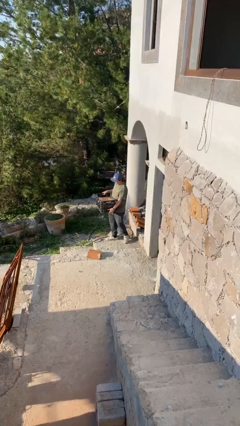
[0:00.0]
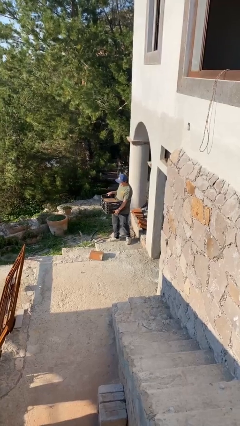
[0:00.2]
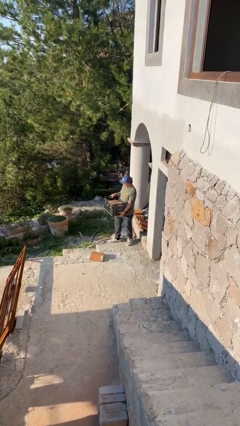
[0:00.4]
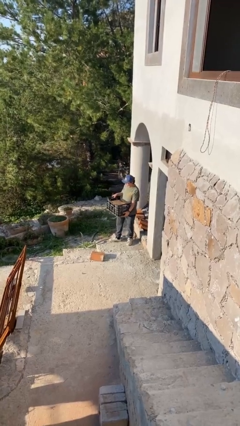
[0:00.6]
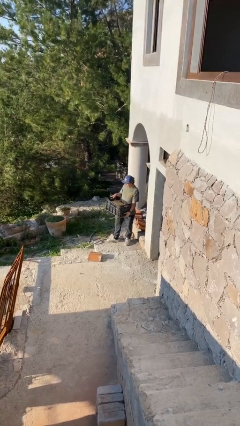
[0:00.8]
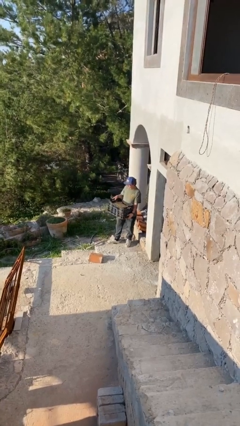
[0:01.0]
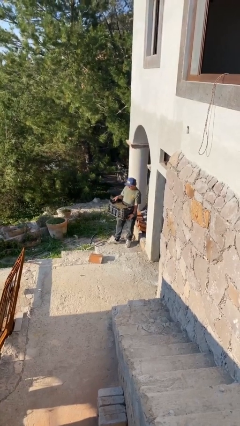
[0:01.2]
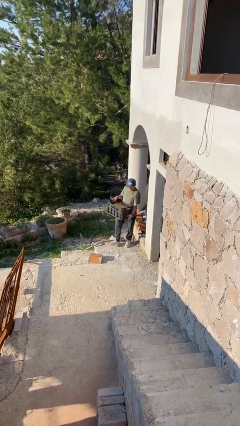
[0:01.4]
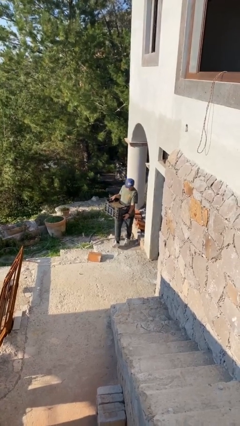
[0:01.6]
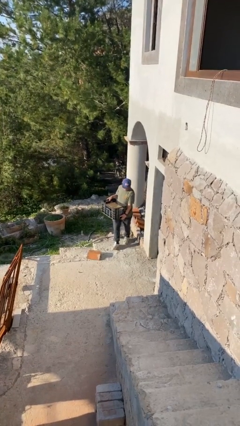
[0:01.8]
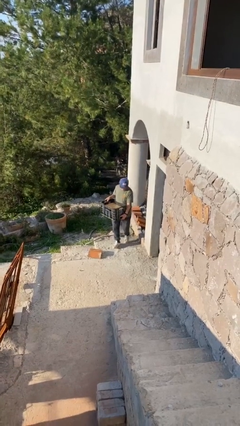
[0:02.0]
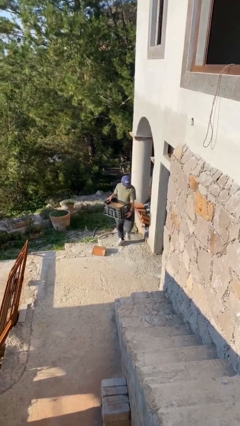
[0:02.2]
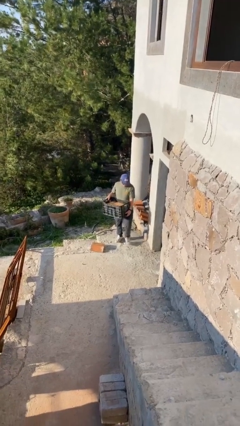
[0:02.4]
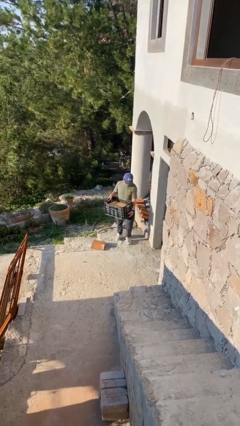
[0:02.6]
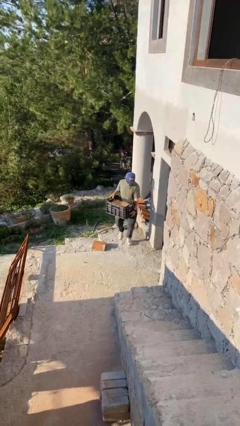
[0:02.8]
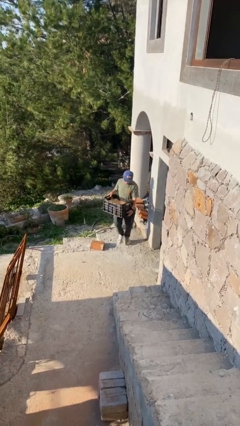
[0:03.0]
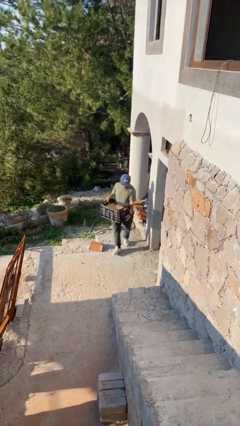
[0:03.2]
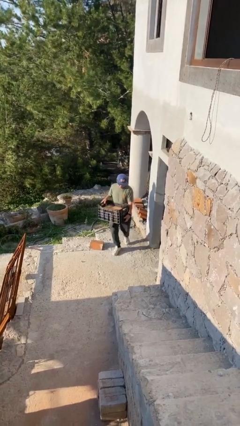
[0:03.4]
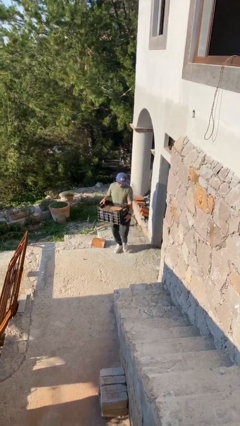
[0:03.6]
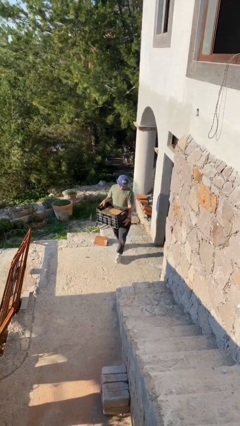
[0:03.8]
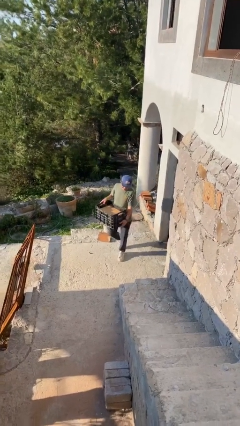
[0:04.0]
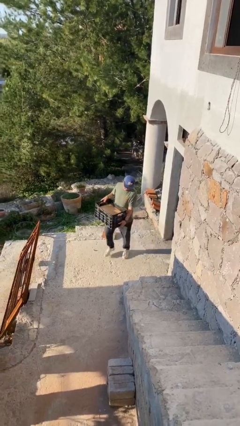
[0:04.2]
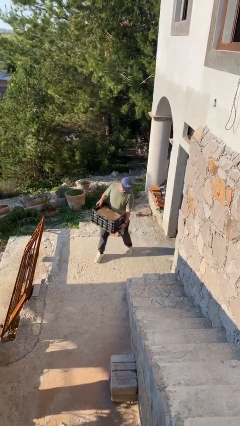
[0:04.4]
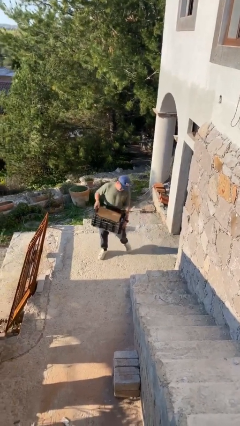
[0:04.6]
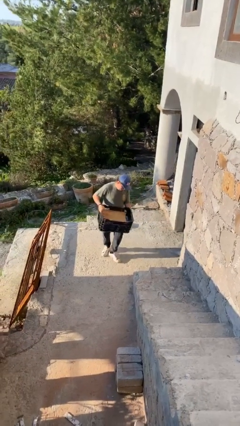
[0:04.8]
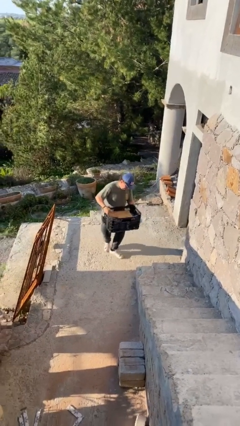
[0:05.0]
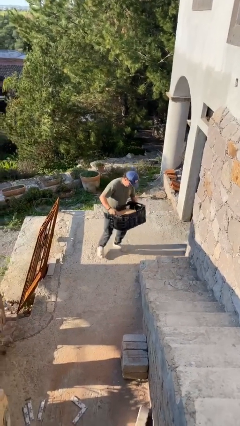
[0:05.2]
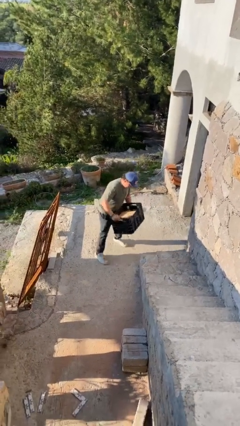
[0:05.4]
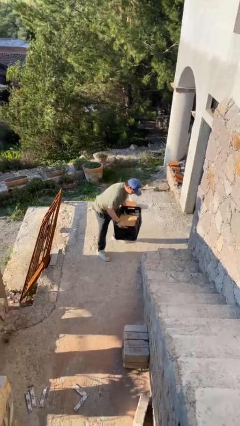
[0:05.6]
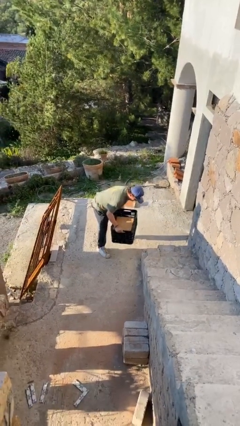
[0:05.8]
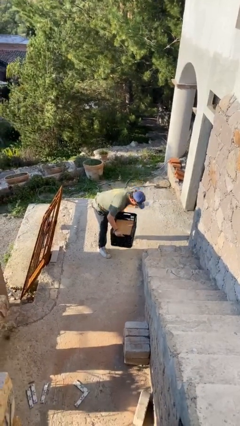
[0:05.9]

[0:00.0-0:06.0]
person carries heavy object

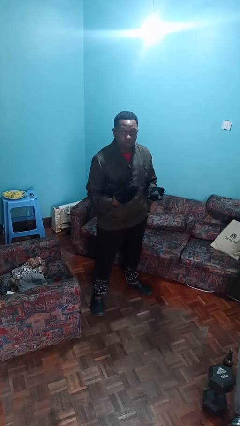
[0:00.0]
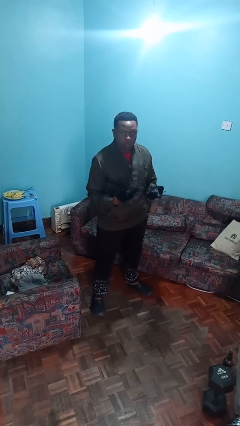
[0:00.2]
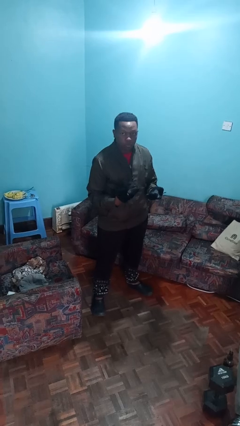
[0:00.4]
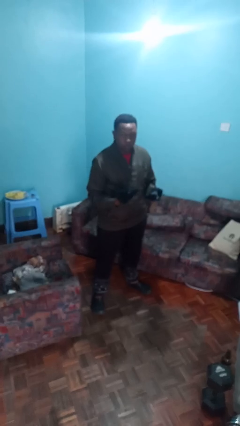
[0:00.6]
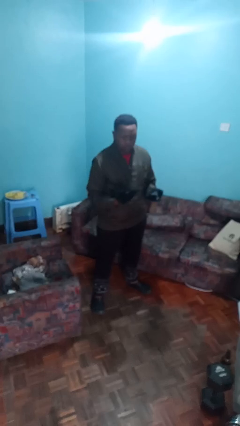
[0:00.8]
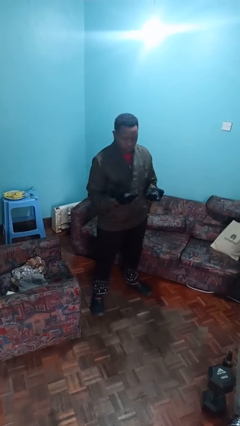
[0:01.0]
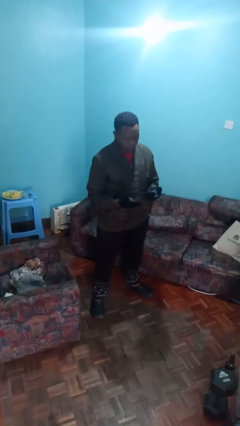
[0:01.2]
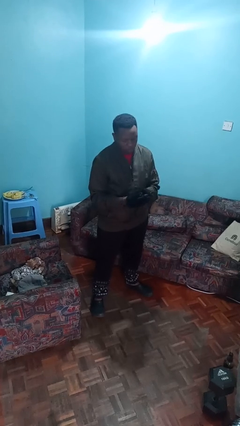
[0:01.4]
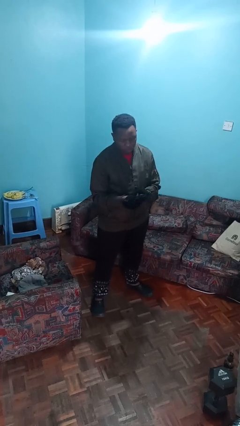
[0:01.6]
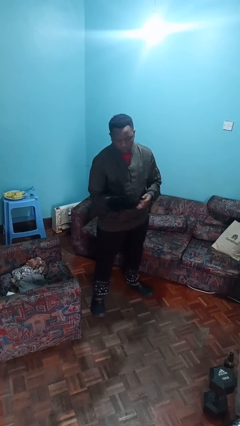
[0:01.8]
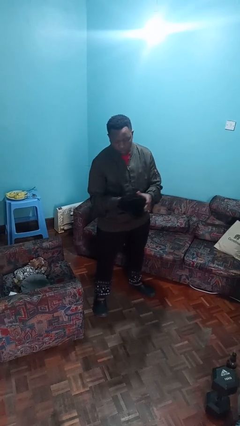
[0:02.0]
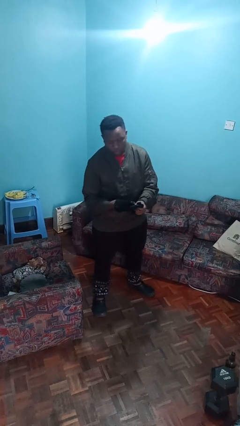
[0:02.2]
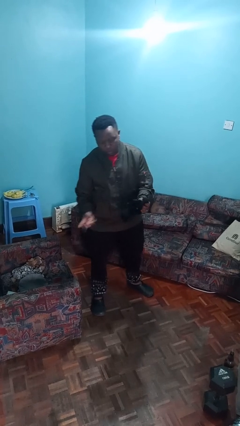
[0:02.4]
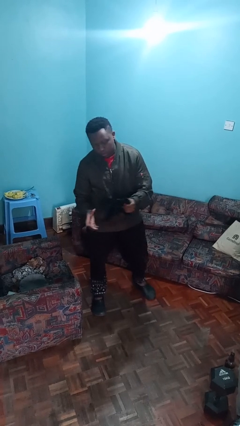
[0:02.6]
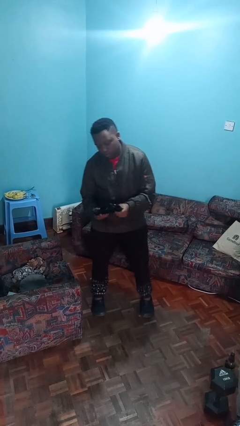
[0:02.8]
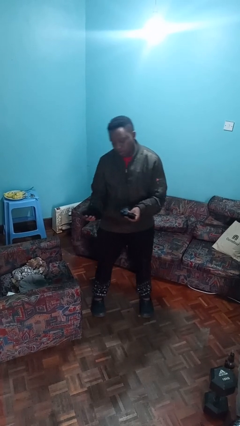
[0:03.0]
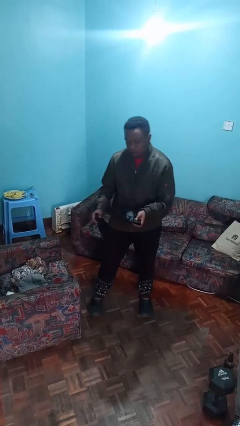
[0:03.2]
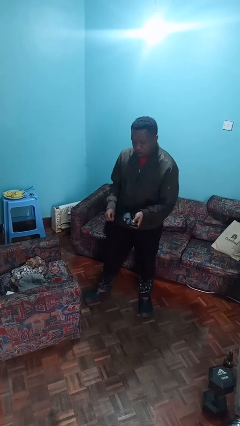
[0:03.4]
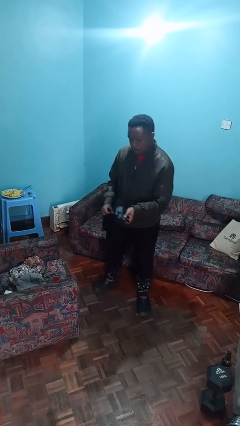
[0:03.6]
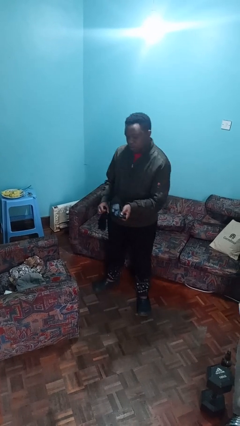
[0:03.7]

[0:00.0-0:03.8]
person takes off gloves

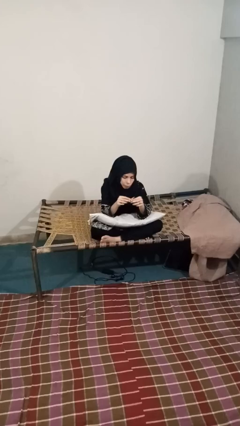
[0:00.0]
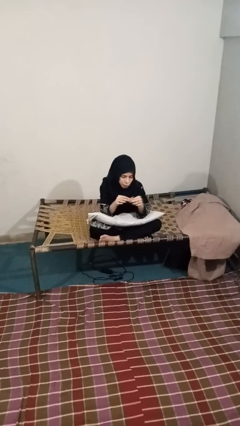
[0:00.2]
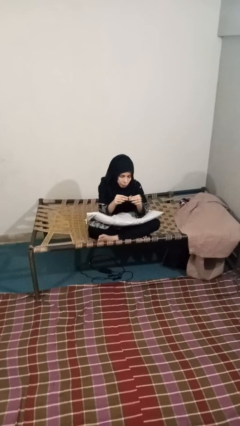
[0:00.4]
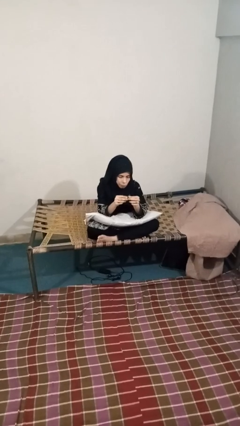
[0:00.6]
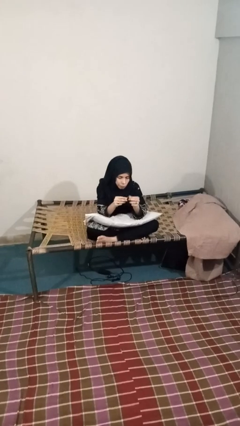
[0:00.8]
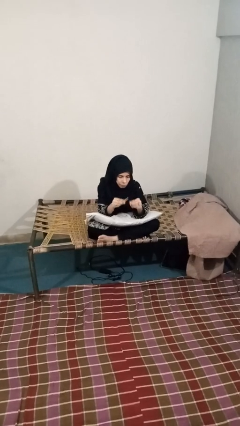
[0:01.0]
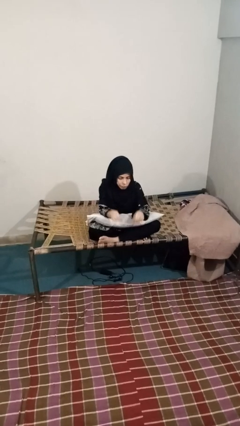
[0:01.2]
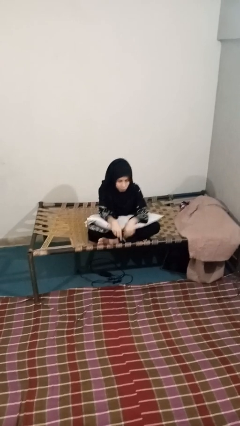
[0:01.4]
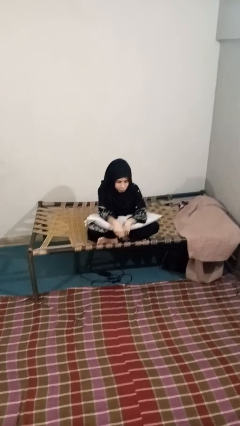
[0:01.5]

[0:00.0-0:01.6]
person files fingernails

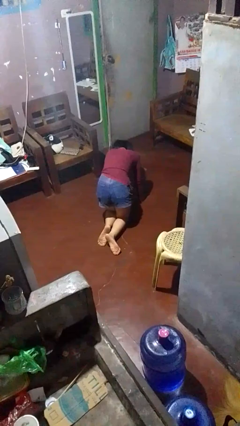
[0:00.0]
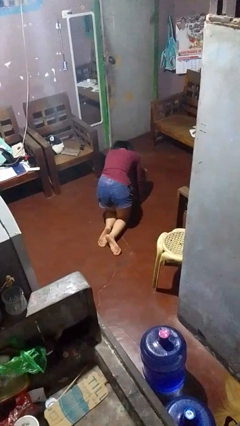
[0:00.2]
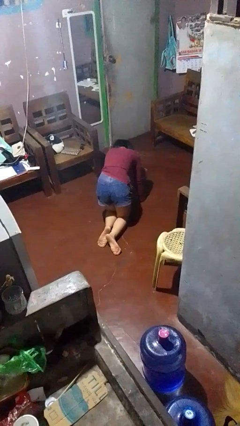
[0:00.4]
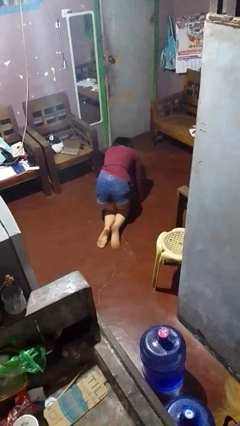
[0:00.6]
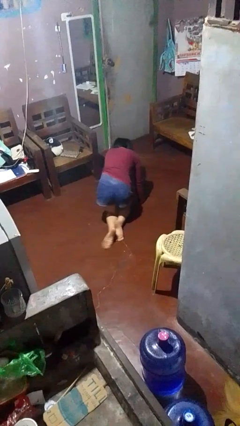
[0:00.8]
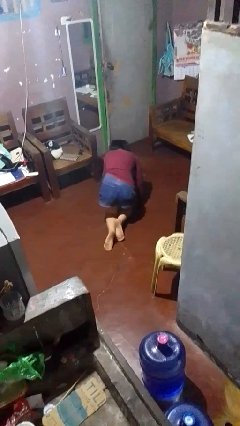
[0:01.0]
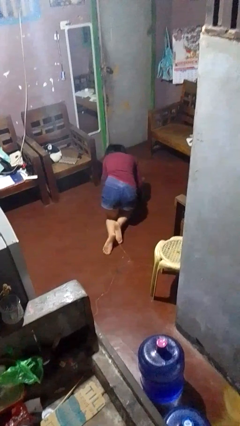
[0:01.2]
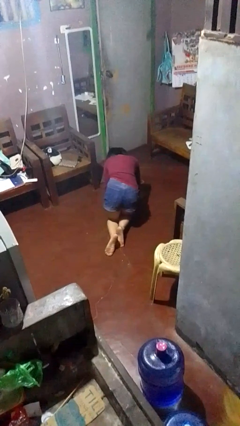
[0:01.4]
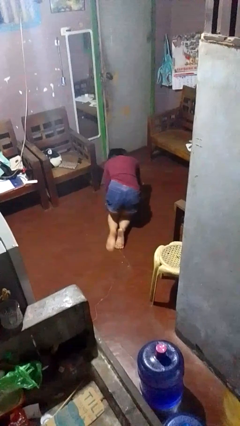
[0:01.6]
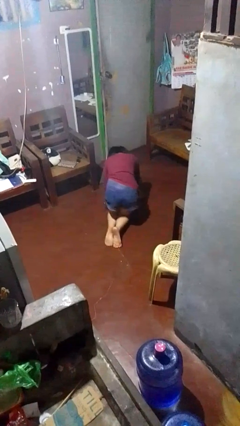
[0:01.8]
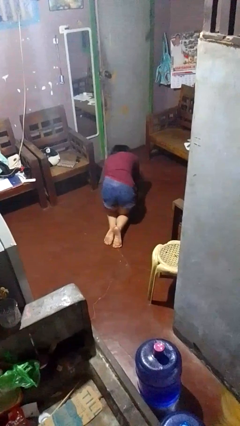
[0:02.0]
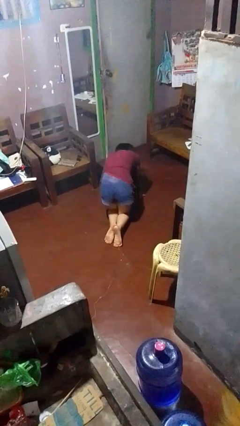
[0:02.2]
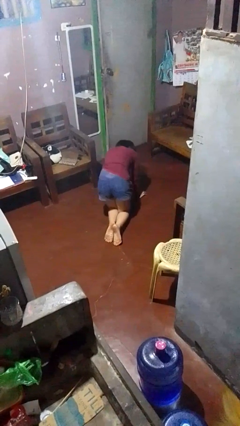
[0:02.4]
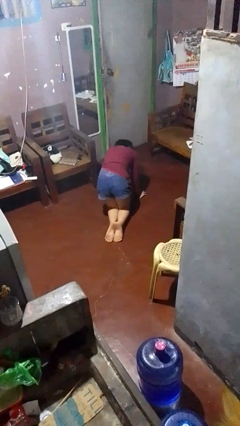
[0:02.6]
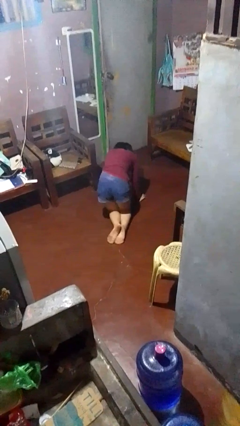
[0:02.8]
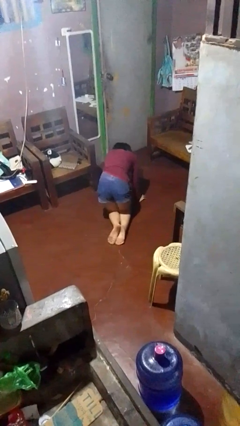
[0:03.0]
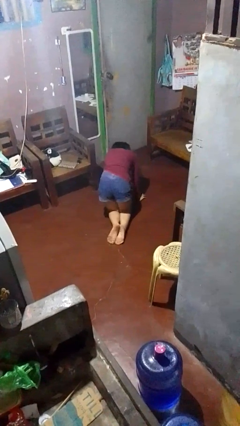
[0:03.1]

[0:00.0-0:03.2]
person crawls

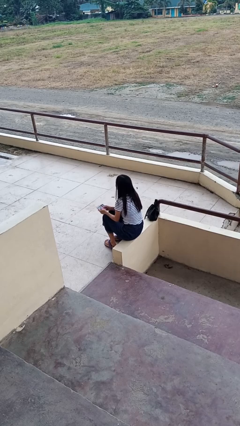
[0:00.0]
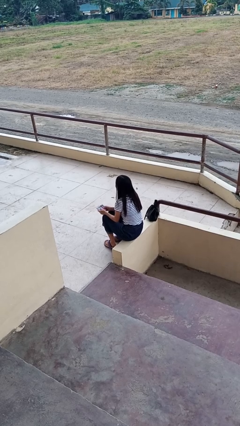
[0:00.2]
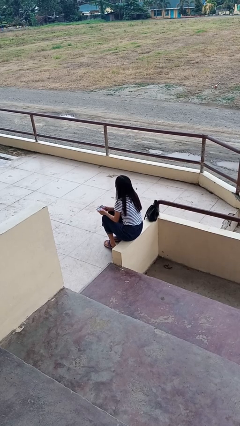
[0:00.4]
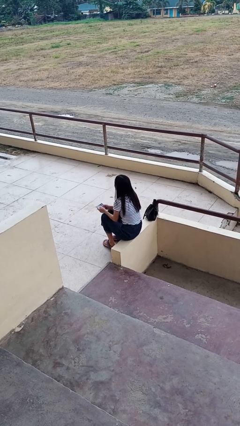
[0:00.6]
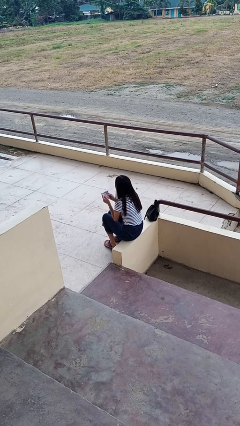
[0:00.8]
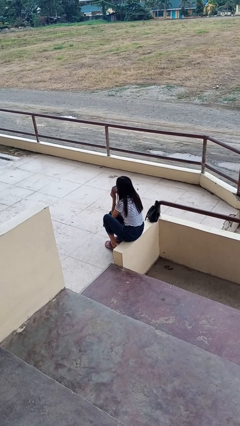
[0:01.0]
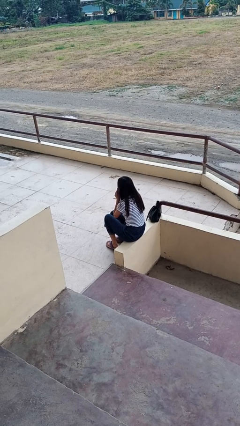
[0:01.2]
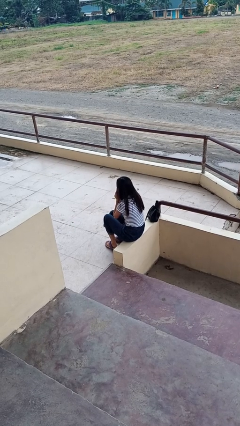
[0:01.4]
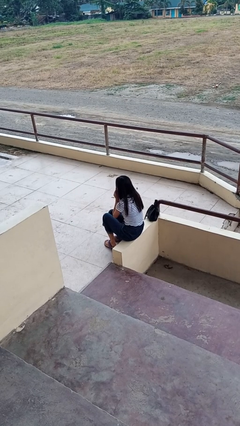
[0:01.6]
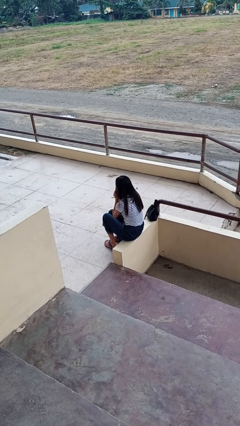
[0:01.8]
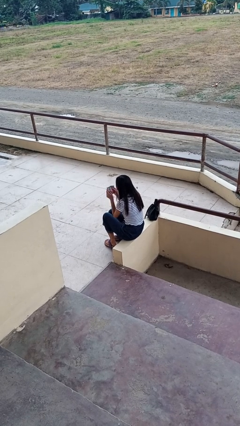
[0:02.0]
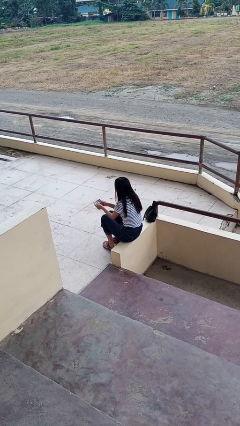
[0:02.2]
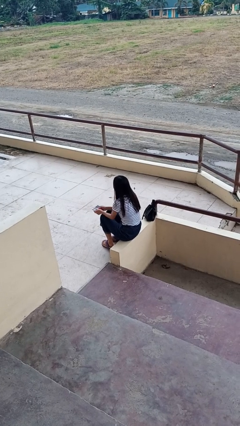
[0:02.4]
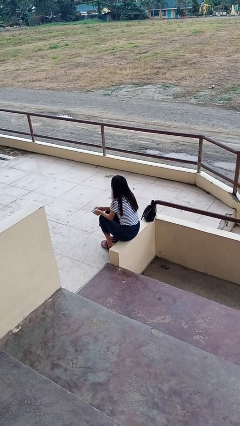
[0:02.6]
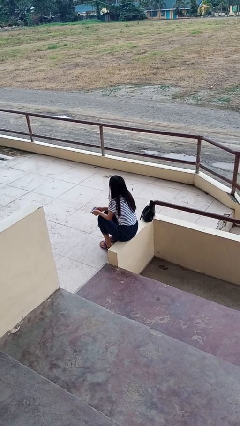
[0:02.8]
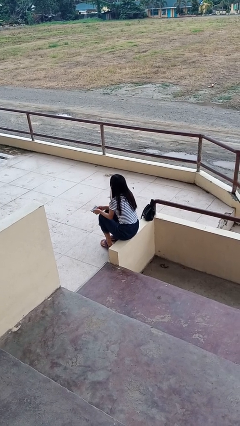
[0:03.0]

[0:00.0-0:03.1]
person blows nose
